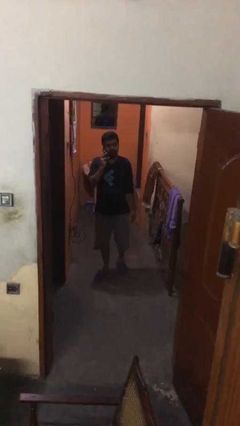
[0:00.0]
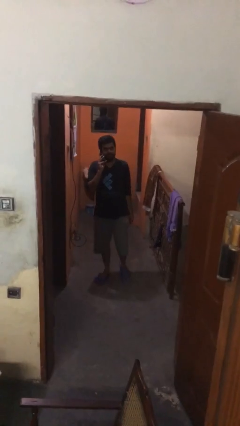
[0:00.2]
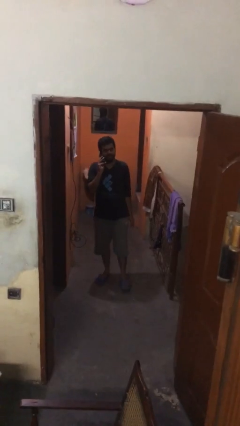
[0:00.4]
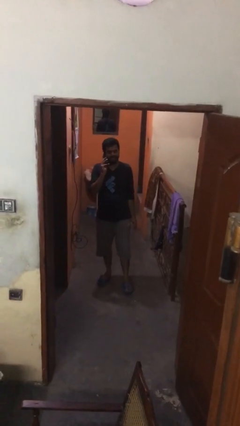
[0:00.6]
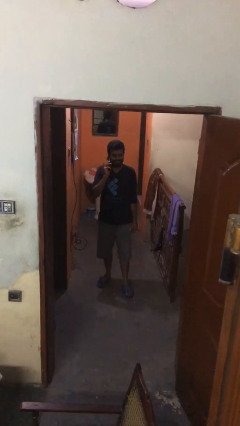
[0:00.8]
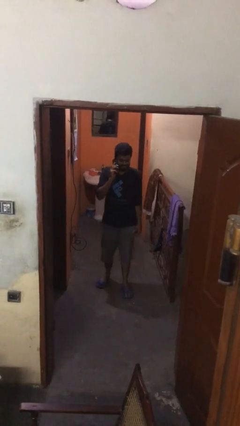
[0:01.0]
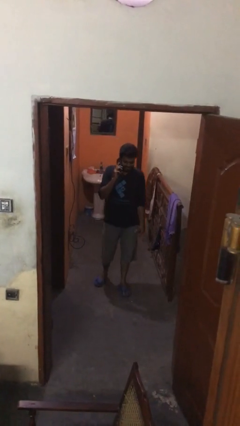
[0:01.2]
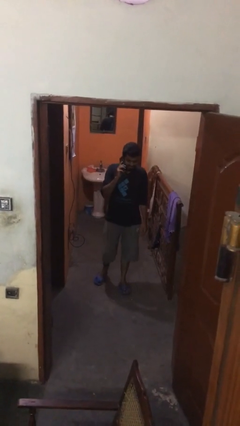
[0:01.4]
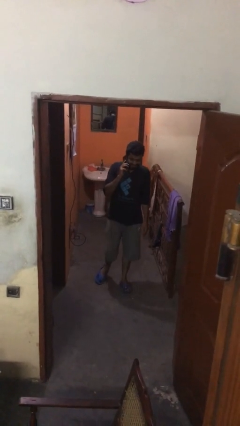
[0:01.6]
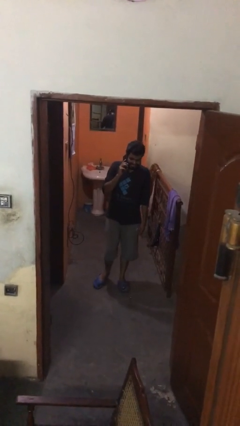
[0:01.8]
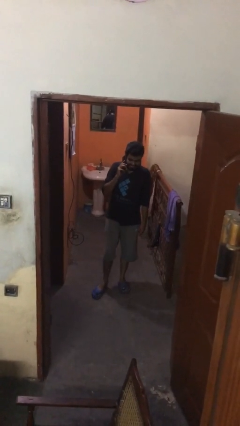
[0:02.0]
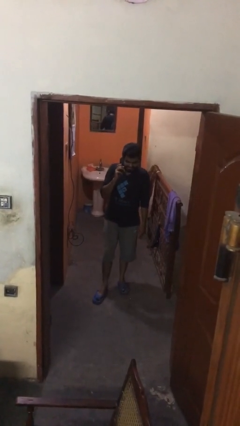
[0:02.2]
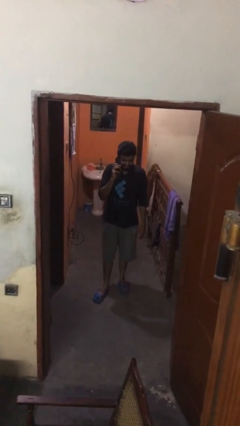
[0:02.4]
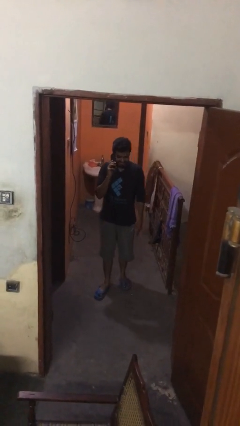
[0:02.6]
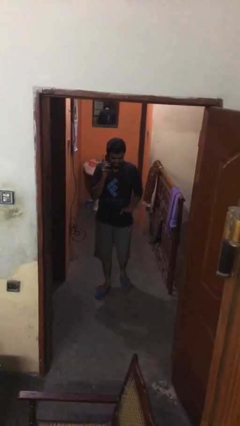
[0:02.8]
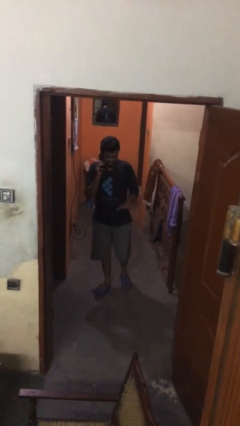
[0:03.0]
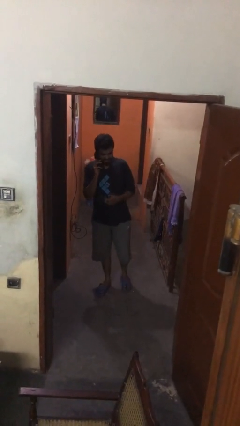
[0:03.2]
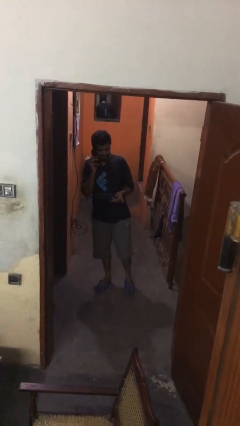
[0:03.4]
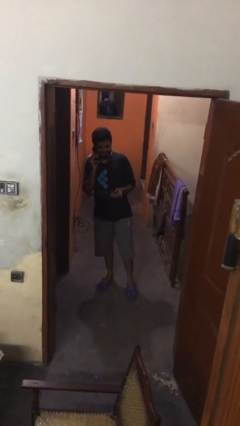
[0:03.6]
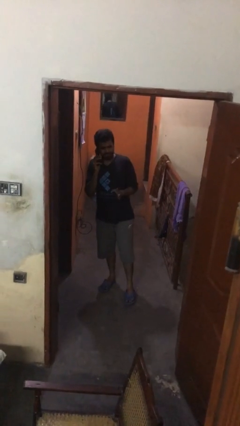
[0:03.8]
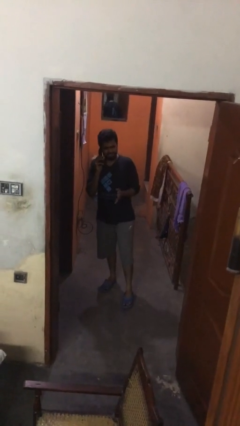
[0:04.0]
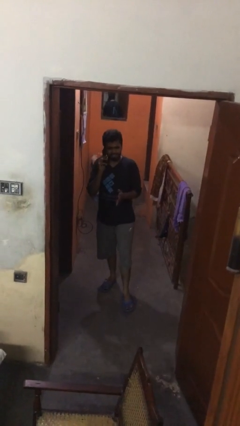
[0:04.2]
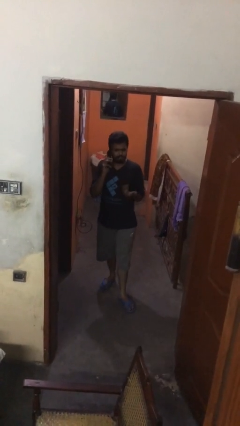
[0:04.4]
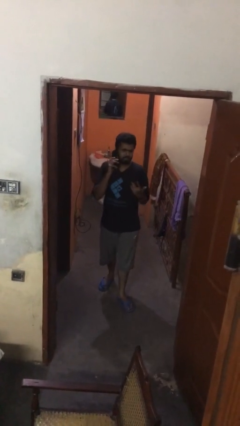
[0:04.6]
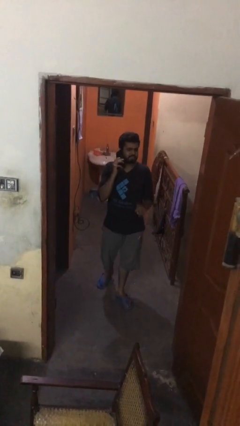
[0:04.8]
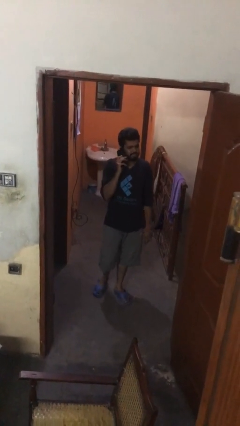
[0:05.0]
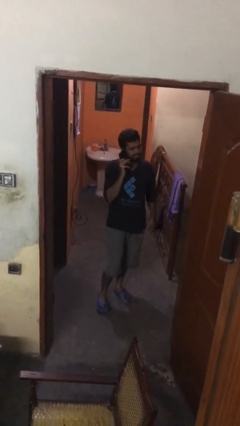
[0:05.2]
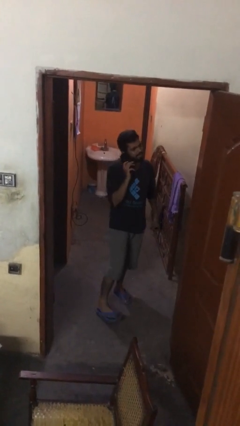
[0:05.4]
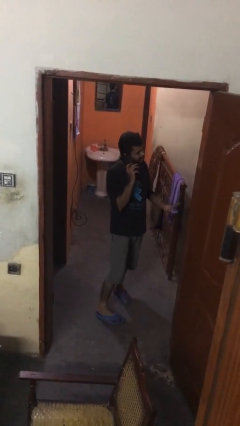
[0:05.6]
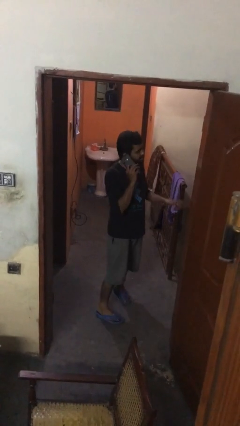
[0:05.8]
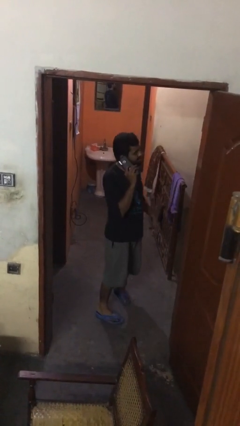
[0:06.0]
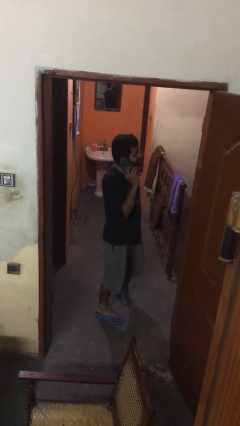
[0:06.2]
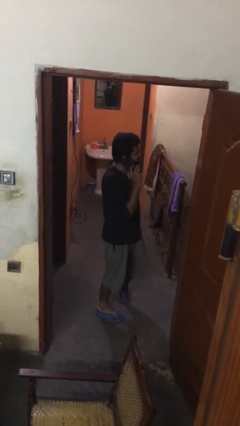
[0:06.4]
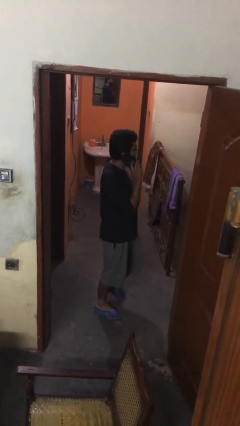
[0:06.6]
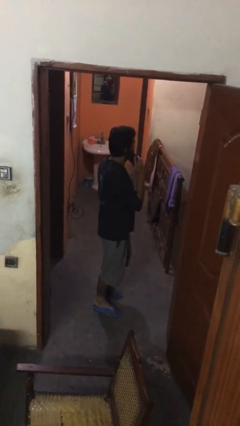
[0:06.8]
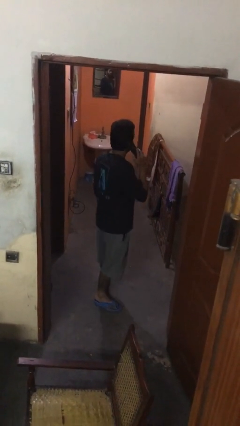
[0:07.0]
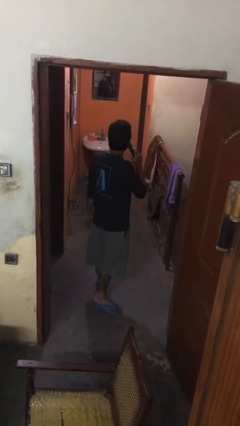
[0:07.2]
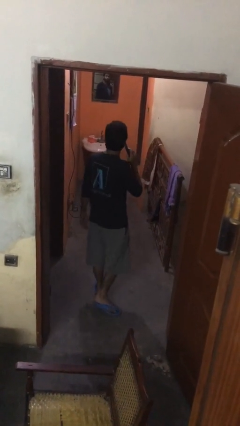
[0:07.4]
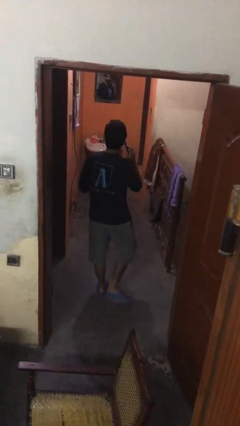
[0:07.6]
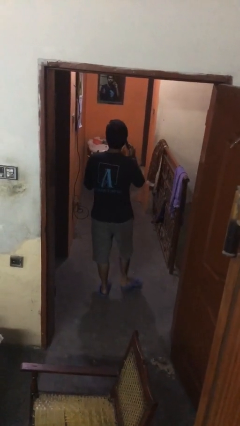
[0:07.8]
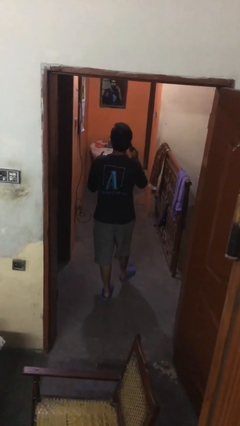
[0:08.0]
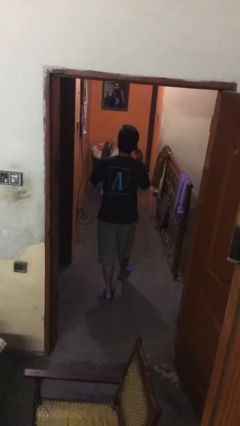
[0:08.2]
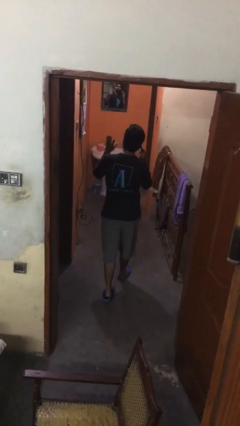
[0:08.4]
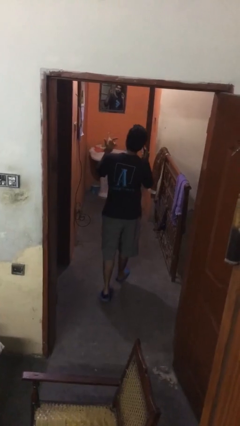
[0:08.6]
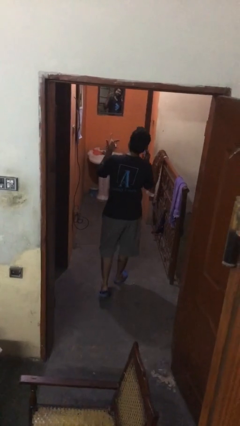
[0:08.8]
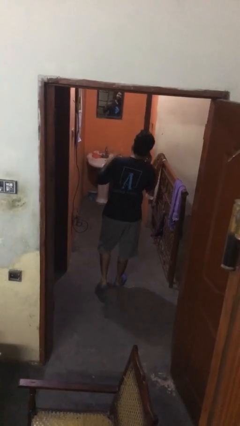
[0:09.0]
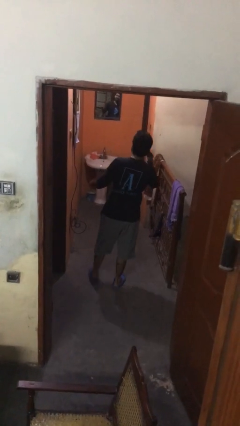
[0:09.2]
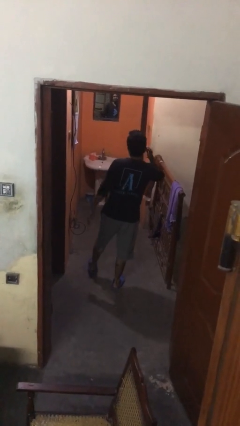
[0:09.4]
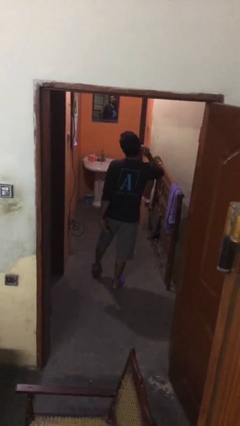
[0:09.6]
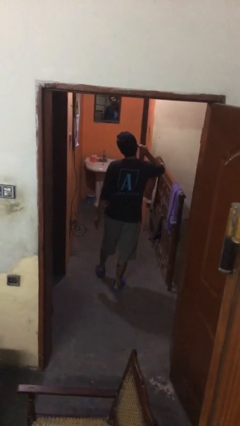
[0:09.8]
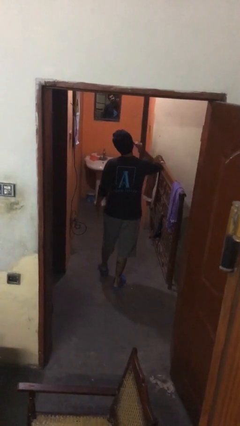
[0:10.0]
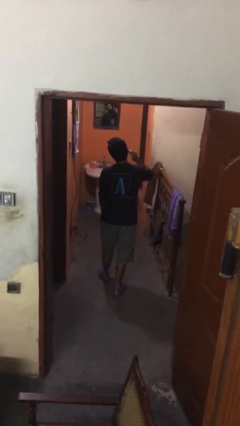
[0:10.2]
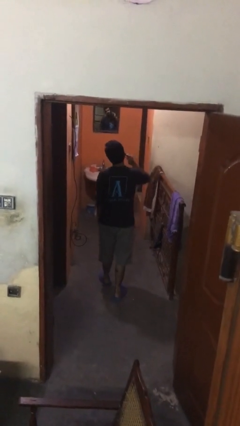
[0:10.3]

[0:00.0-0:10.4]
person talks on phone

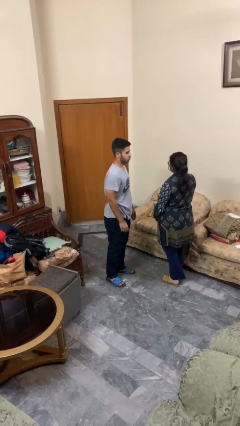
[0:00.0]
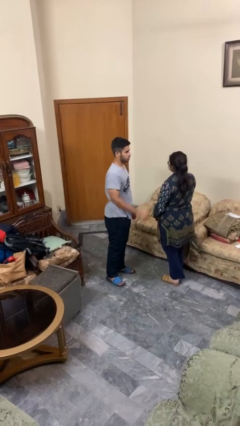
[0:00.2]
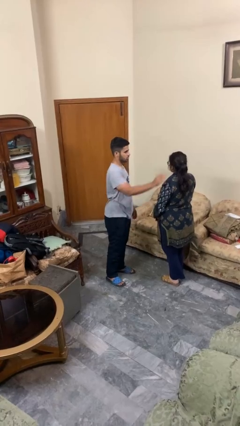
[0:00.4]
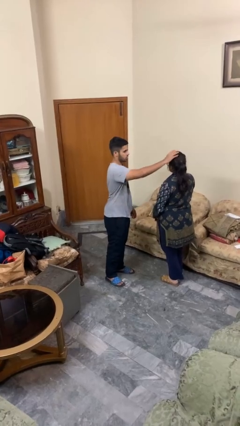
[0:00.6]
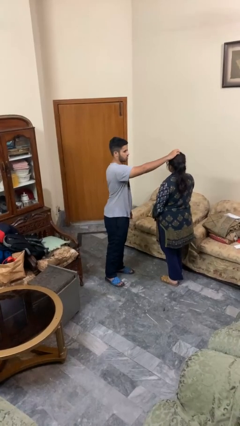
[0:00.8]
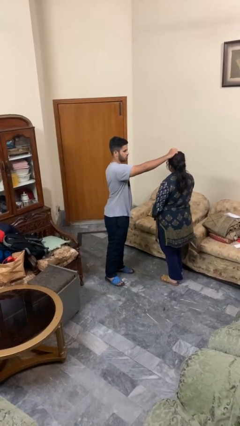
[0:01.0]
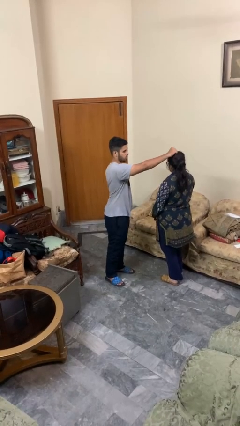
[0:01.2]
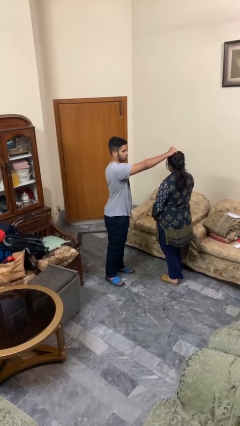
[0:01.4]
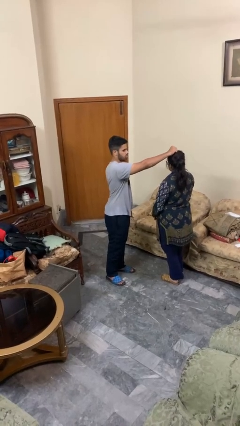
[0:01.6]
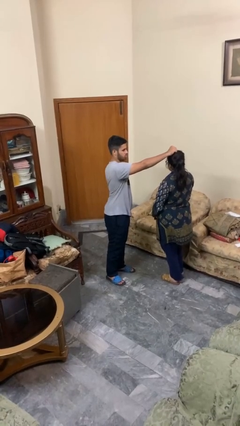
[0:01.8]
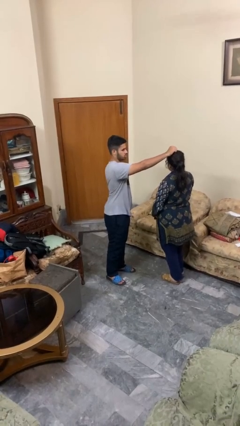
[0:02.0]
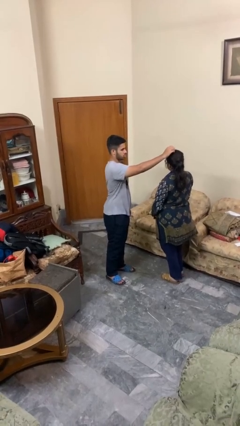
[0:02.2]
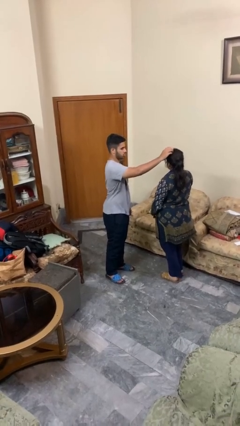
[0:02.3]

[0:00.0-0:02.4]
person grabs person by hair

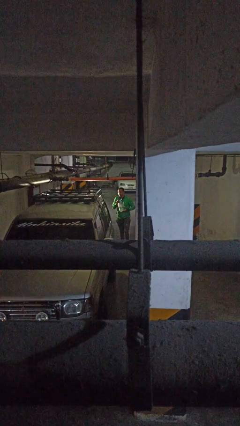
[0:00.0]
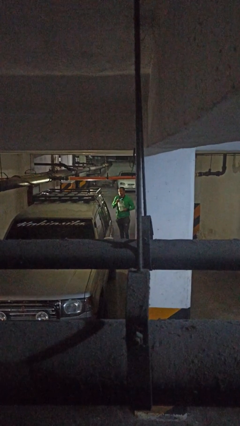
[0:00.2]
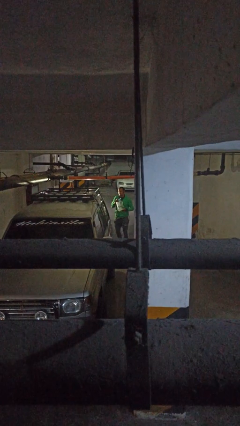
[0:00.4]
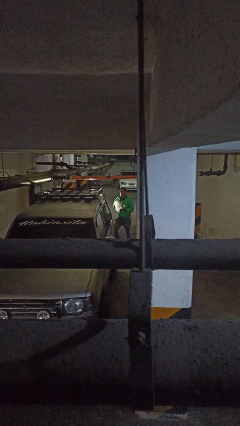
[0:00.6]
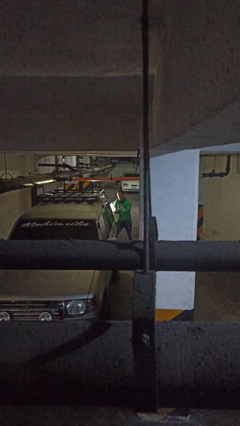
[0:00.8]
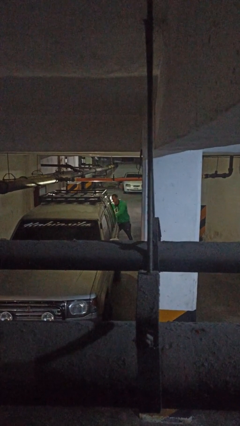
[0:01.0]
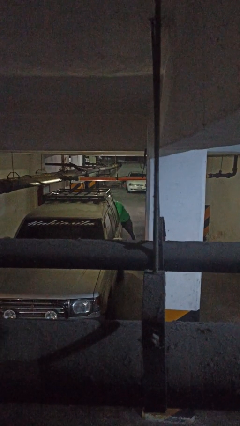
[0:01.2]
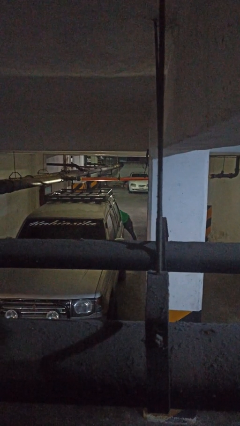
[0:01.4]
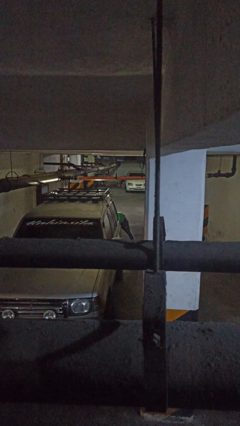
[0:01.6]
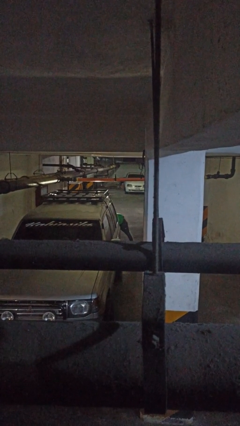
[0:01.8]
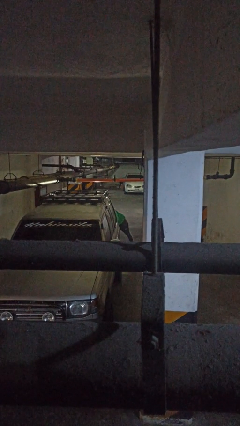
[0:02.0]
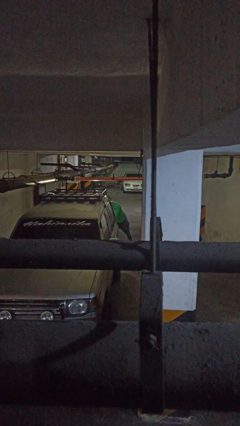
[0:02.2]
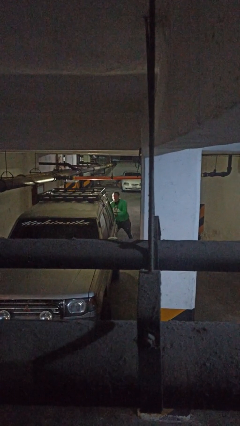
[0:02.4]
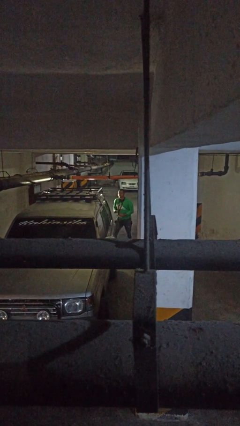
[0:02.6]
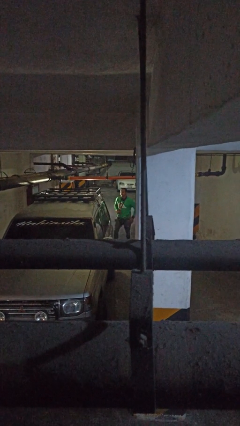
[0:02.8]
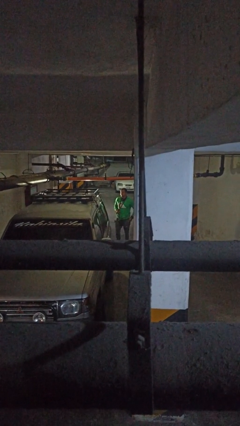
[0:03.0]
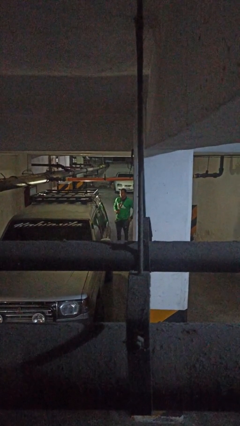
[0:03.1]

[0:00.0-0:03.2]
person loads car

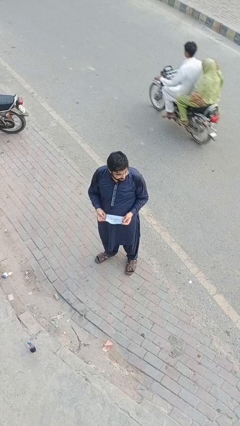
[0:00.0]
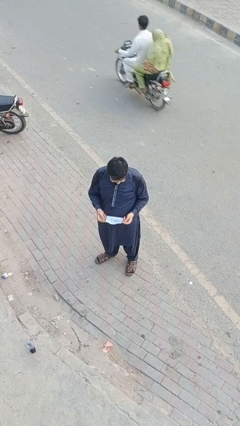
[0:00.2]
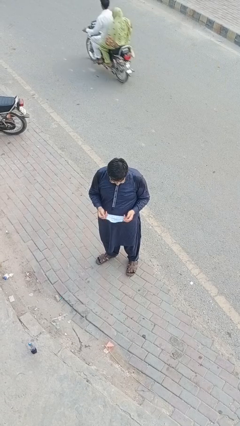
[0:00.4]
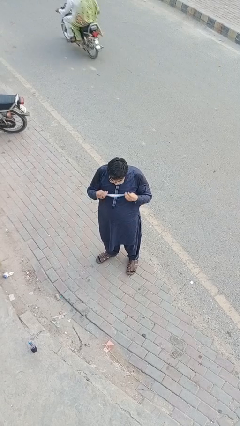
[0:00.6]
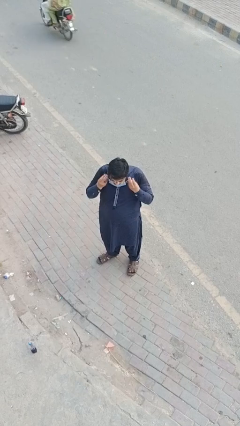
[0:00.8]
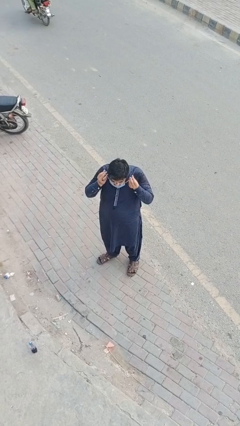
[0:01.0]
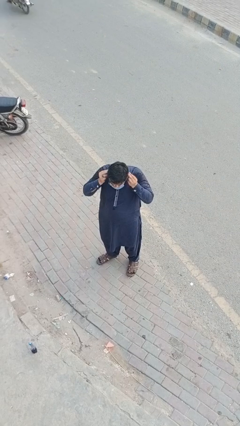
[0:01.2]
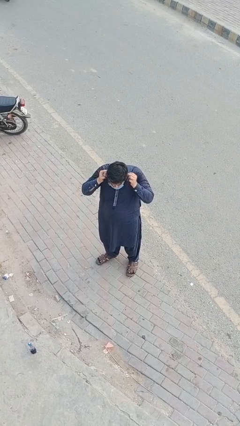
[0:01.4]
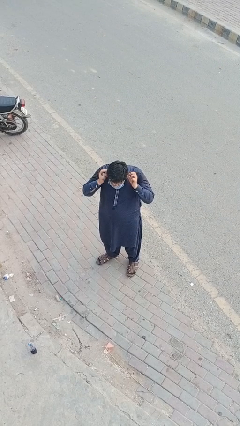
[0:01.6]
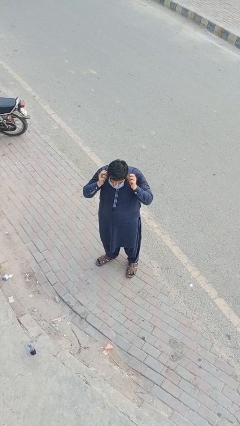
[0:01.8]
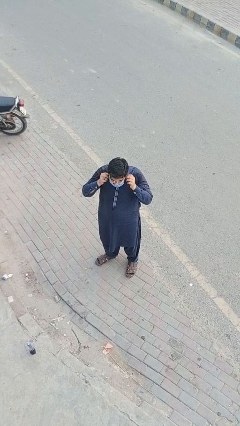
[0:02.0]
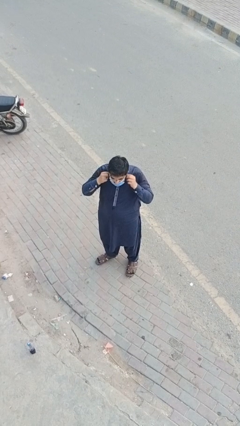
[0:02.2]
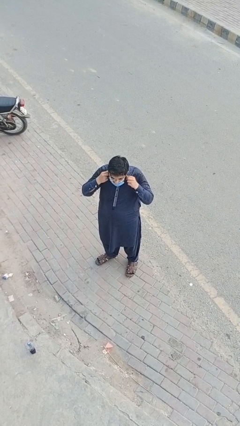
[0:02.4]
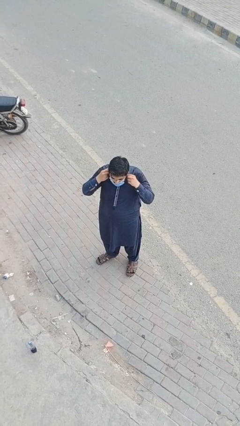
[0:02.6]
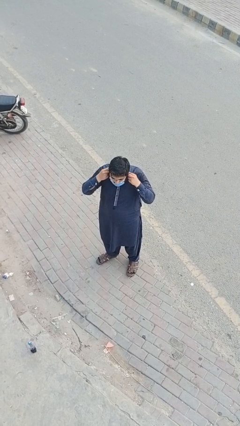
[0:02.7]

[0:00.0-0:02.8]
person puts on facemask
